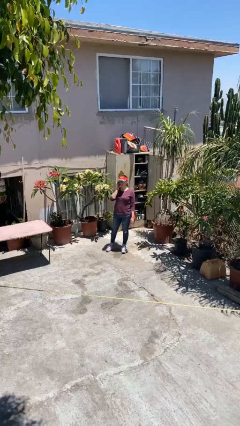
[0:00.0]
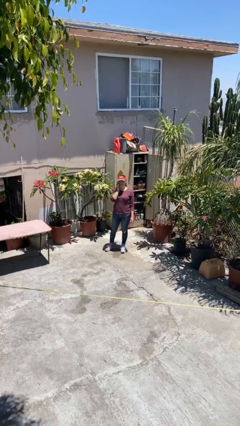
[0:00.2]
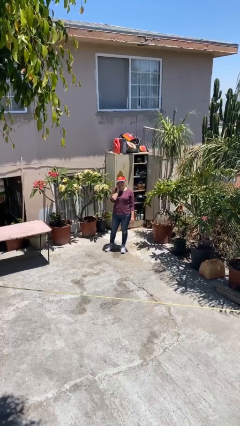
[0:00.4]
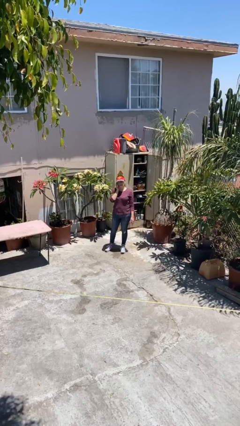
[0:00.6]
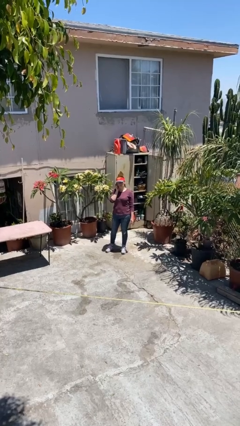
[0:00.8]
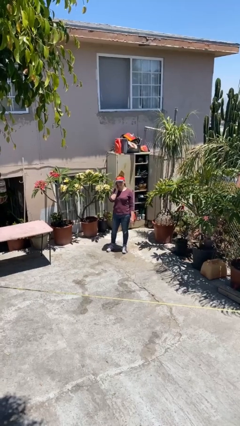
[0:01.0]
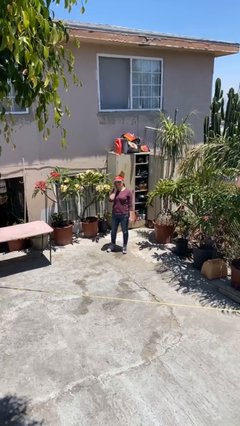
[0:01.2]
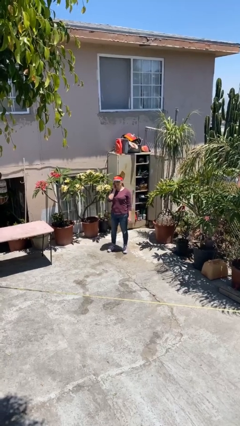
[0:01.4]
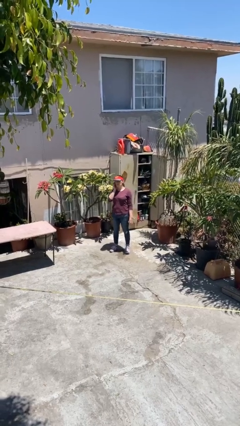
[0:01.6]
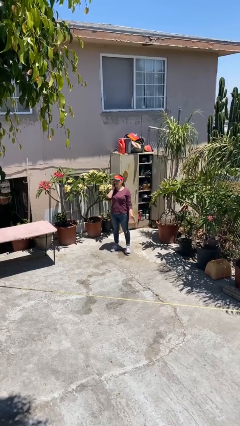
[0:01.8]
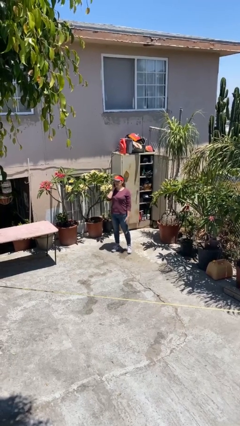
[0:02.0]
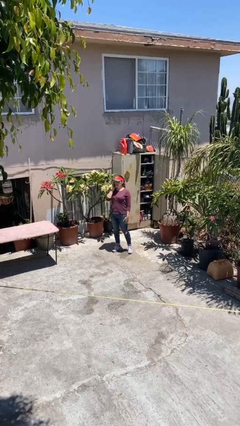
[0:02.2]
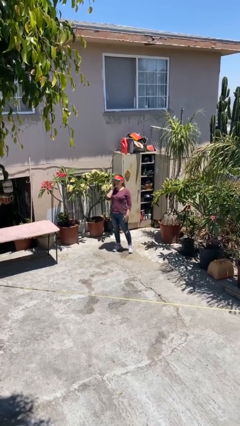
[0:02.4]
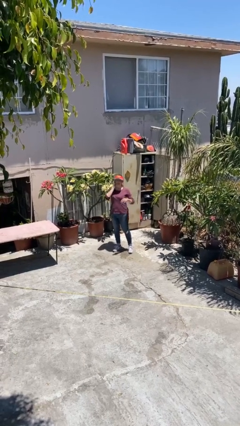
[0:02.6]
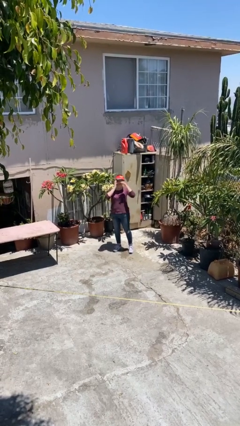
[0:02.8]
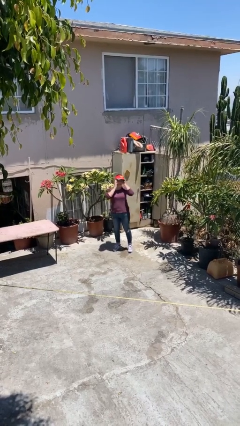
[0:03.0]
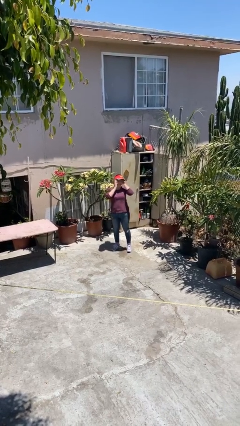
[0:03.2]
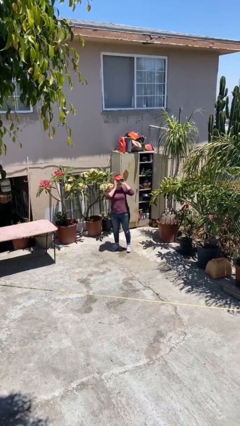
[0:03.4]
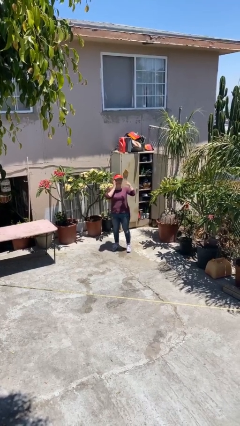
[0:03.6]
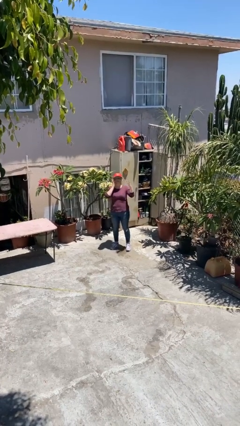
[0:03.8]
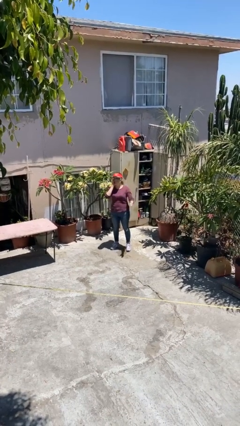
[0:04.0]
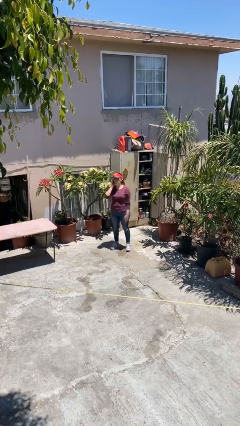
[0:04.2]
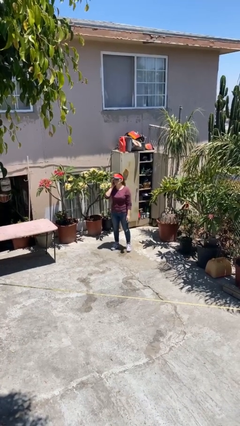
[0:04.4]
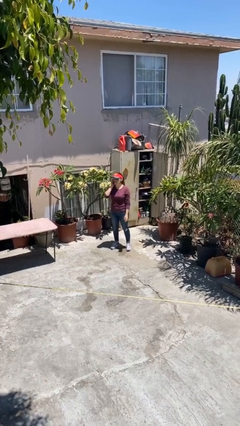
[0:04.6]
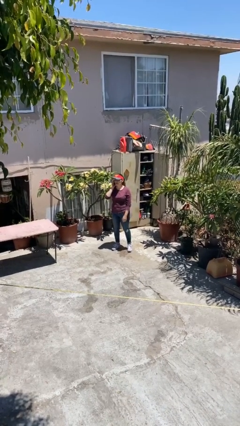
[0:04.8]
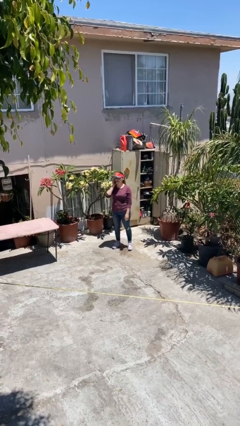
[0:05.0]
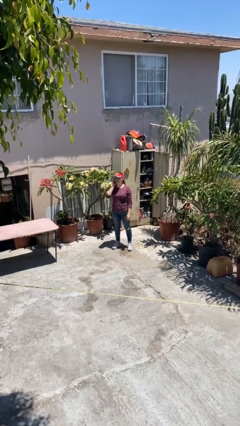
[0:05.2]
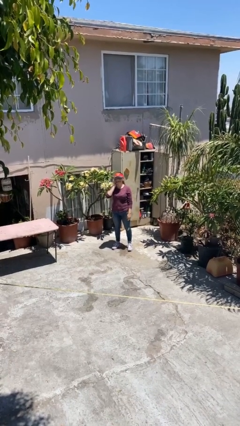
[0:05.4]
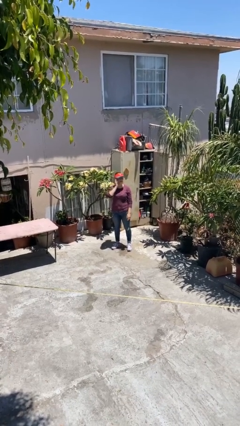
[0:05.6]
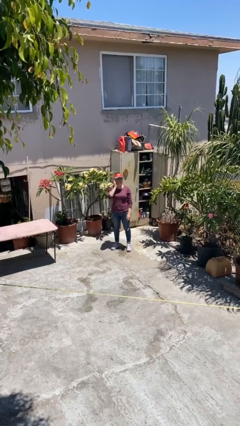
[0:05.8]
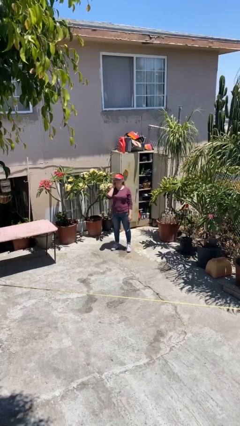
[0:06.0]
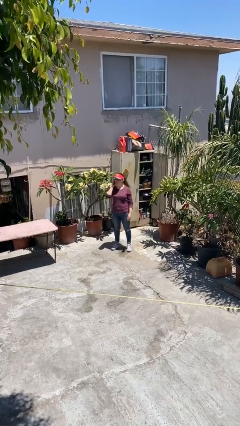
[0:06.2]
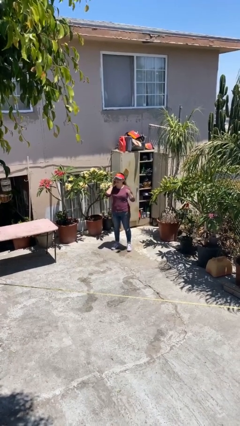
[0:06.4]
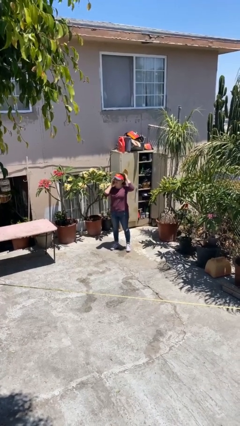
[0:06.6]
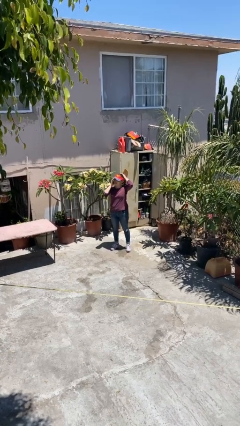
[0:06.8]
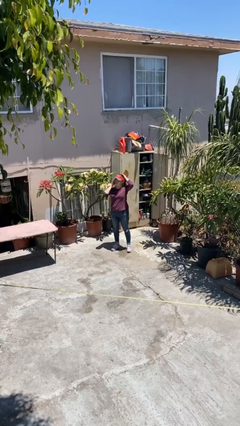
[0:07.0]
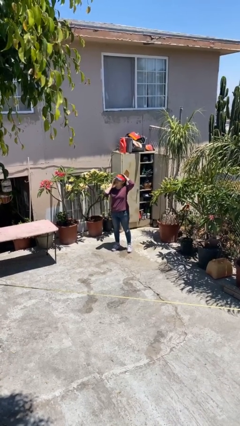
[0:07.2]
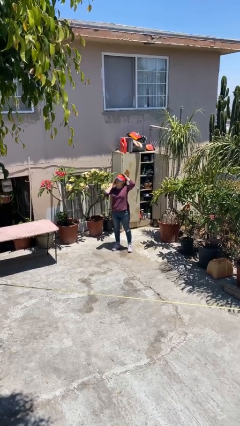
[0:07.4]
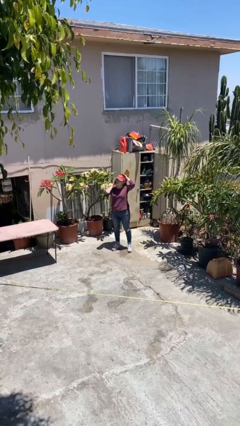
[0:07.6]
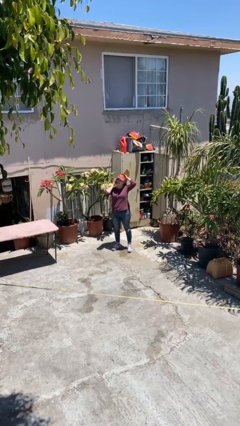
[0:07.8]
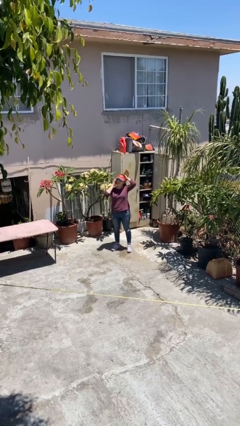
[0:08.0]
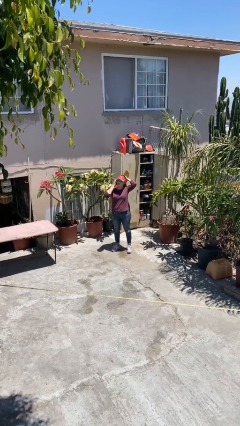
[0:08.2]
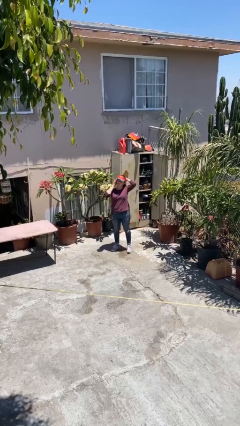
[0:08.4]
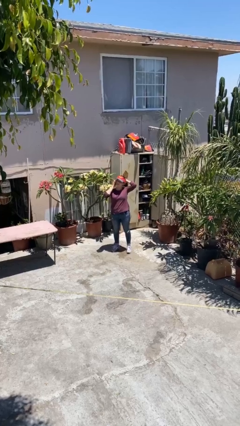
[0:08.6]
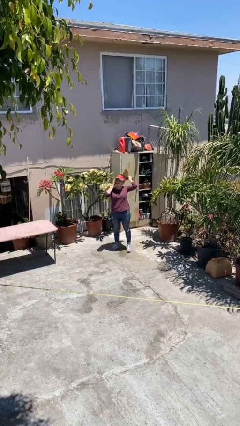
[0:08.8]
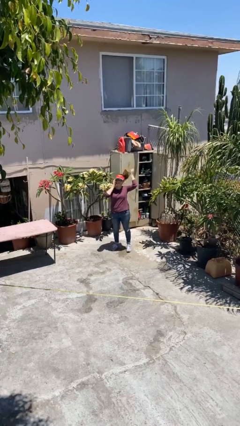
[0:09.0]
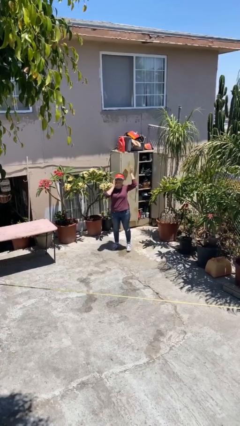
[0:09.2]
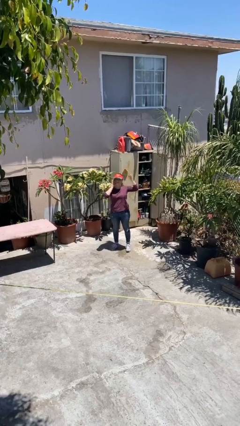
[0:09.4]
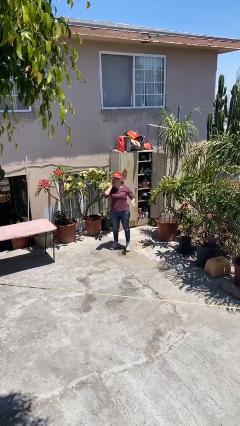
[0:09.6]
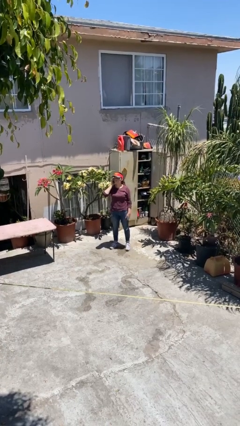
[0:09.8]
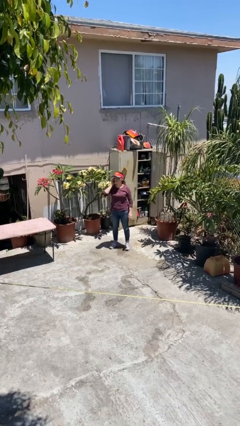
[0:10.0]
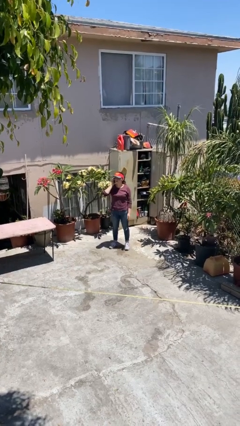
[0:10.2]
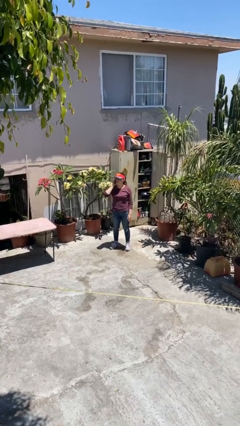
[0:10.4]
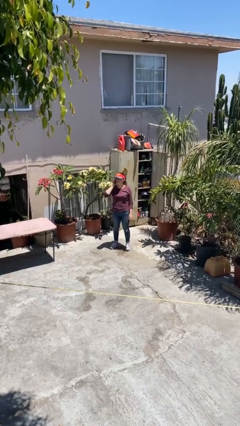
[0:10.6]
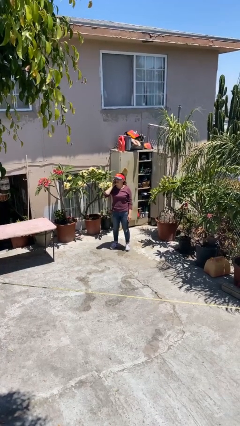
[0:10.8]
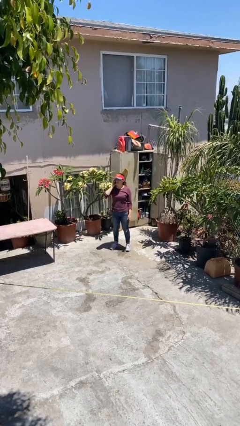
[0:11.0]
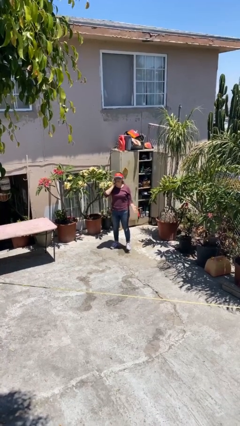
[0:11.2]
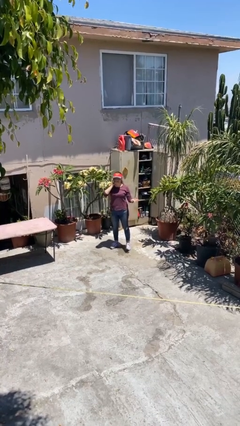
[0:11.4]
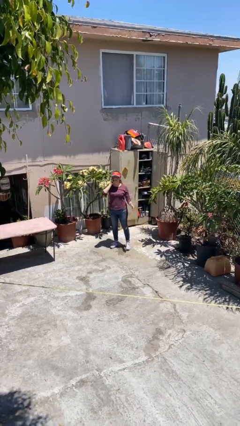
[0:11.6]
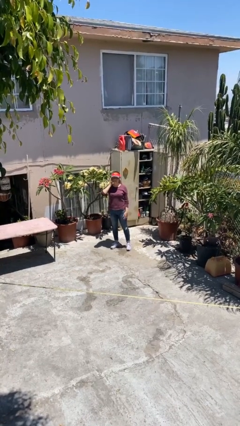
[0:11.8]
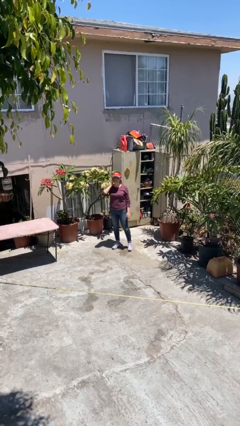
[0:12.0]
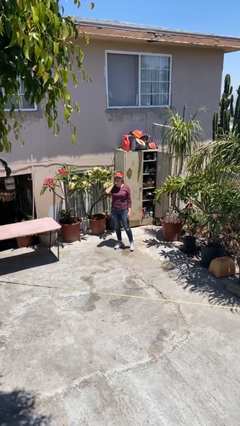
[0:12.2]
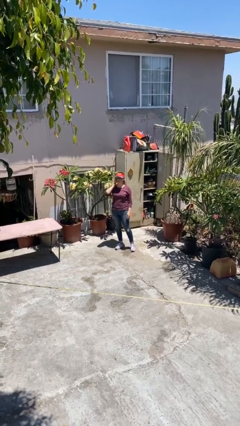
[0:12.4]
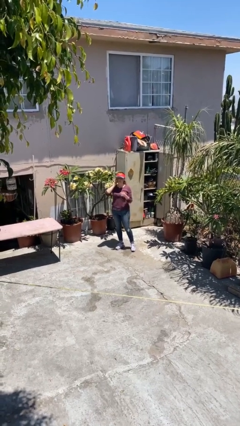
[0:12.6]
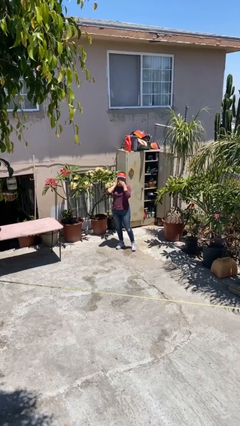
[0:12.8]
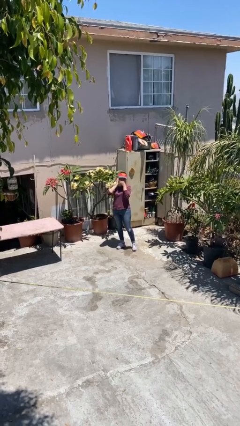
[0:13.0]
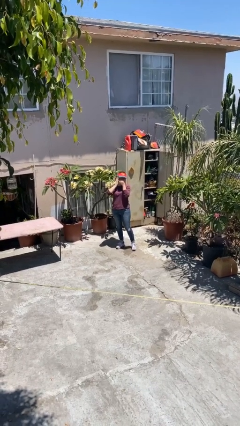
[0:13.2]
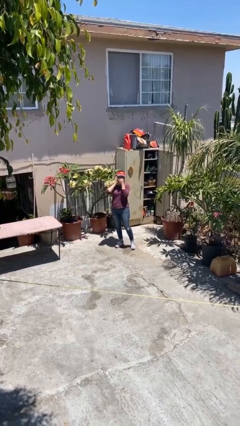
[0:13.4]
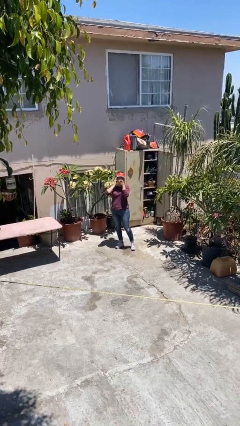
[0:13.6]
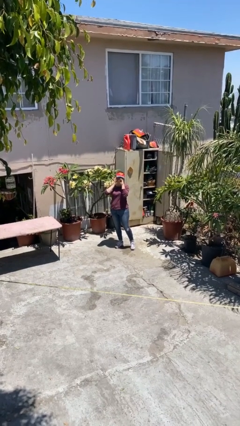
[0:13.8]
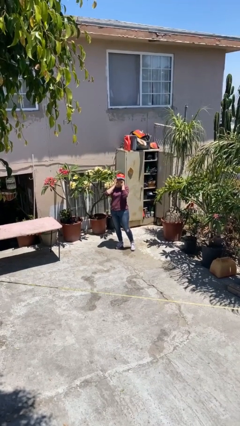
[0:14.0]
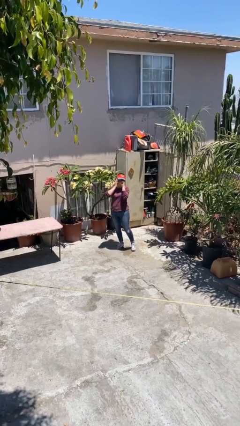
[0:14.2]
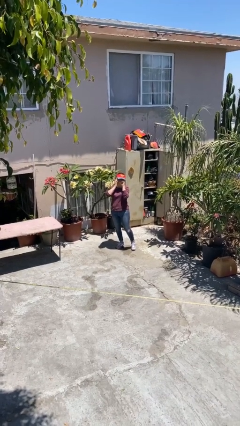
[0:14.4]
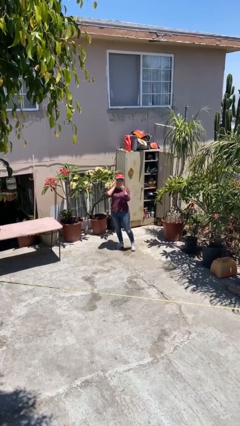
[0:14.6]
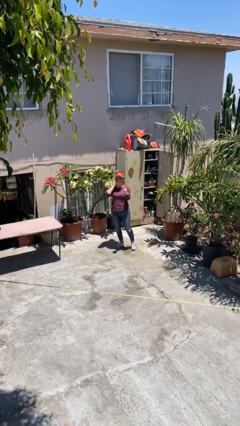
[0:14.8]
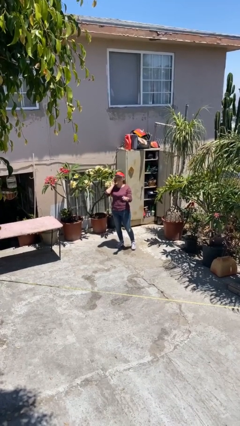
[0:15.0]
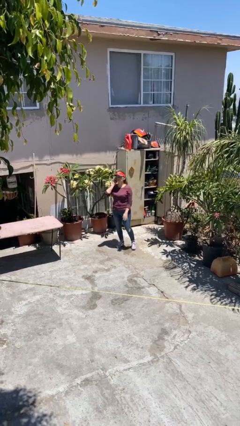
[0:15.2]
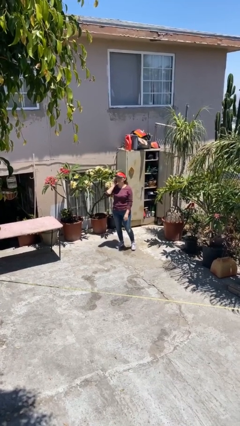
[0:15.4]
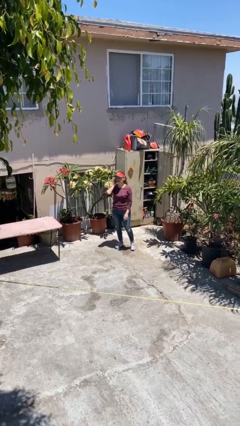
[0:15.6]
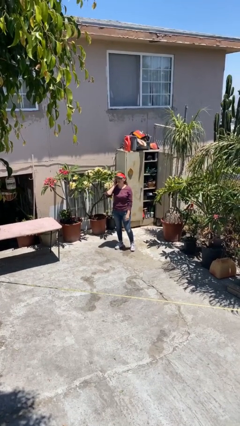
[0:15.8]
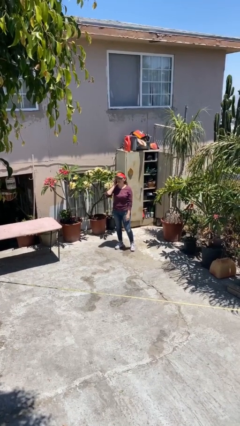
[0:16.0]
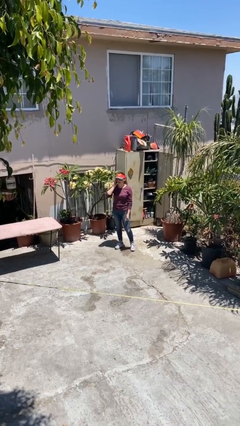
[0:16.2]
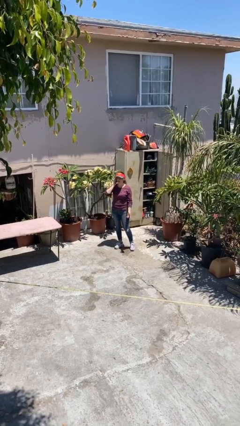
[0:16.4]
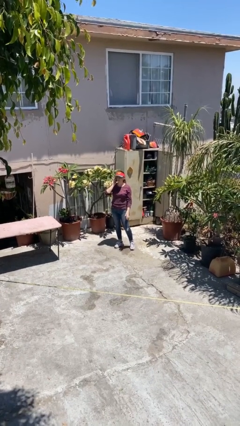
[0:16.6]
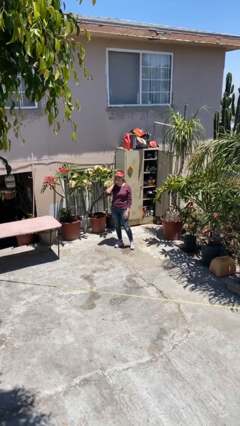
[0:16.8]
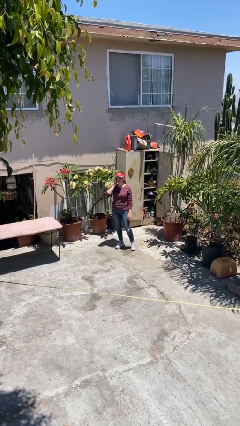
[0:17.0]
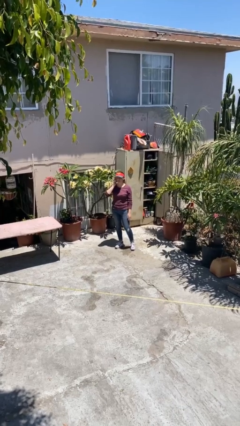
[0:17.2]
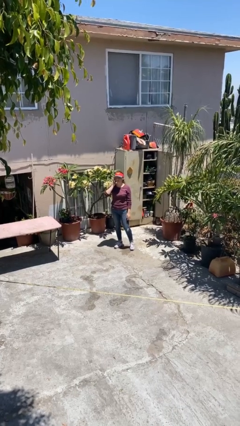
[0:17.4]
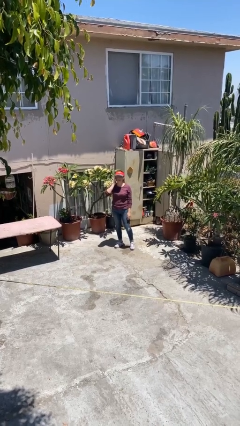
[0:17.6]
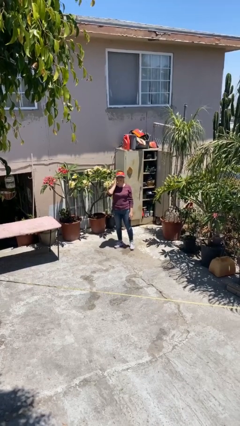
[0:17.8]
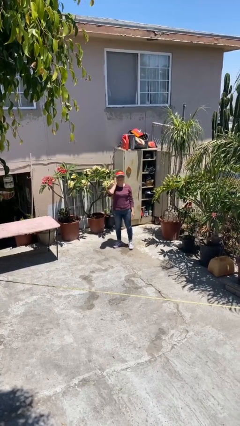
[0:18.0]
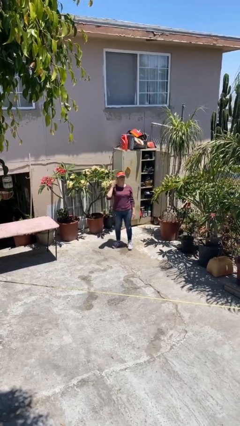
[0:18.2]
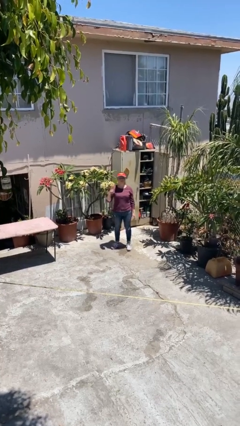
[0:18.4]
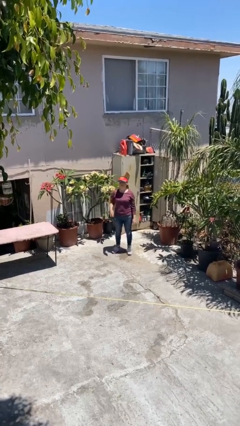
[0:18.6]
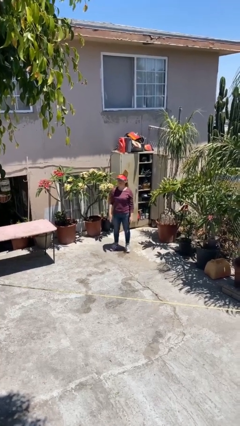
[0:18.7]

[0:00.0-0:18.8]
person talks on phone
